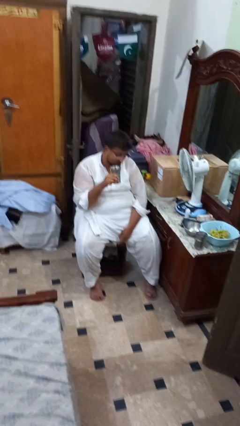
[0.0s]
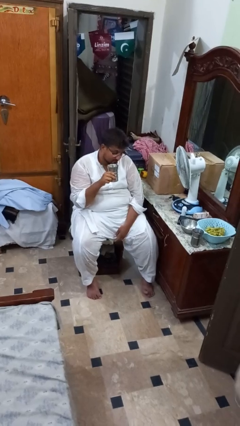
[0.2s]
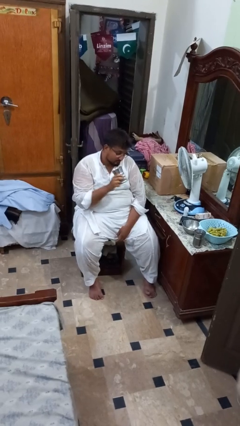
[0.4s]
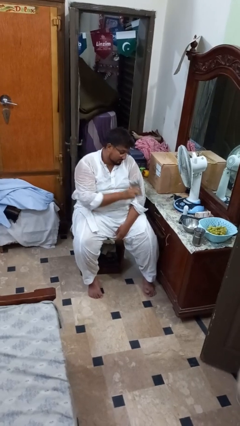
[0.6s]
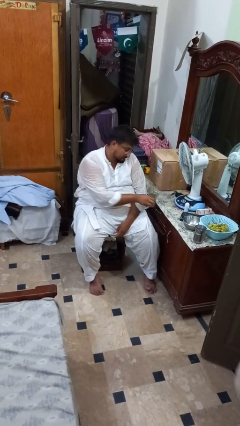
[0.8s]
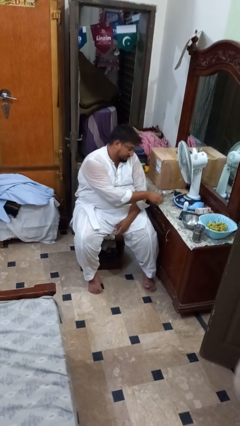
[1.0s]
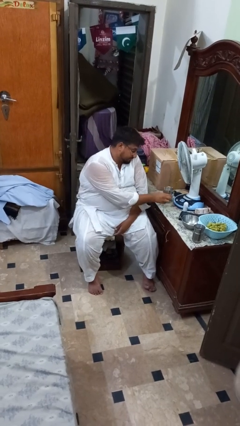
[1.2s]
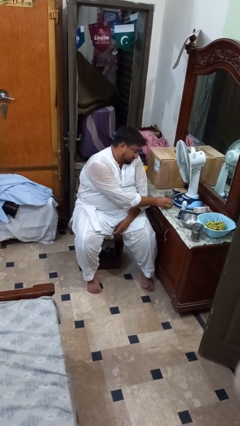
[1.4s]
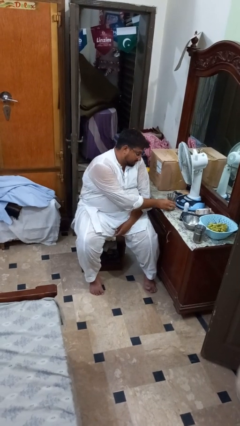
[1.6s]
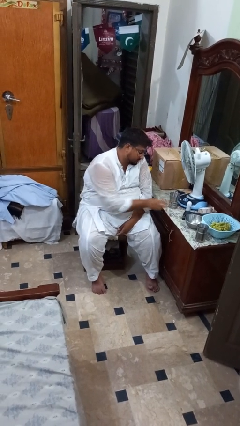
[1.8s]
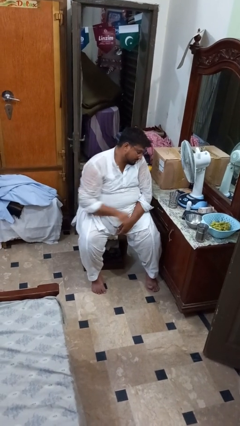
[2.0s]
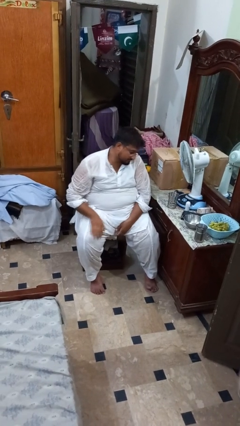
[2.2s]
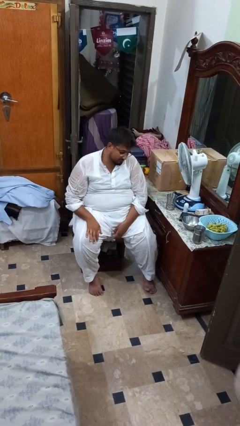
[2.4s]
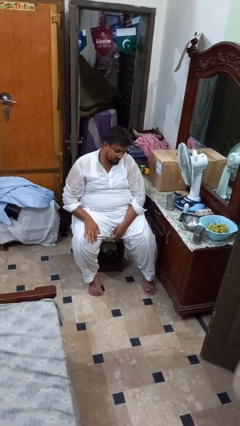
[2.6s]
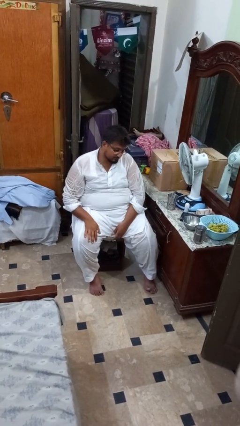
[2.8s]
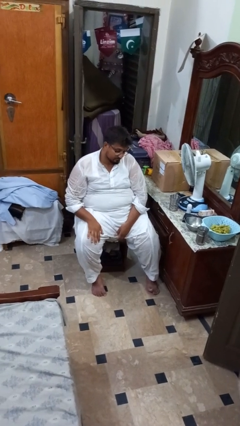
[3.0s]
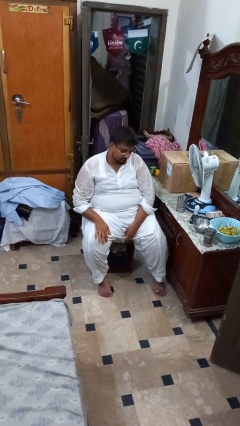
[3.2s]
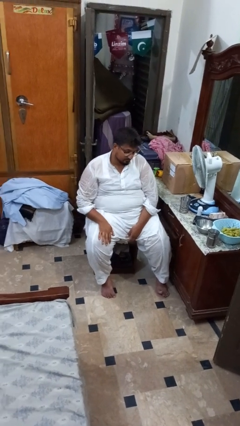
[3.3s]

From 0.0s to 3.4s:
person puts down object on table

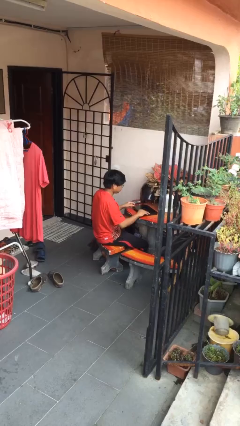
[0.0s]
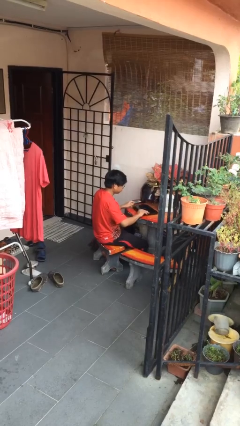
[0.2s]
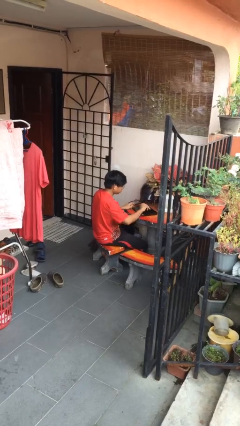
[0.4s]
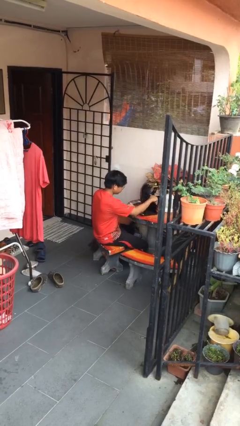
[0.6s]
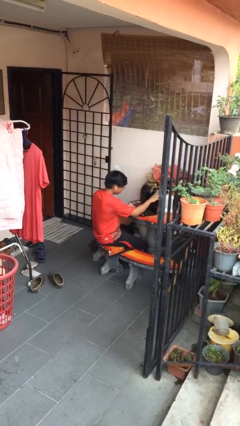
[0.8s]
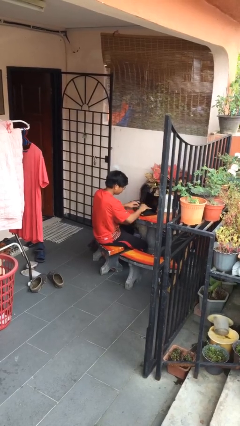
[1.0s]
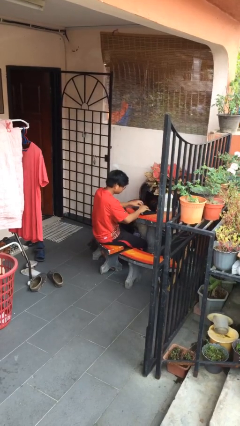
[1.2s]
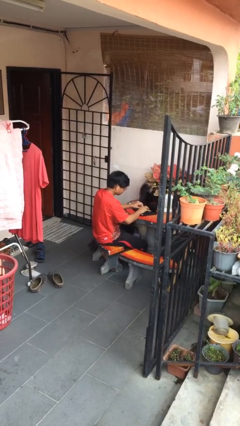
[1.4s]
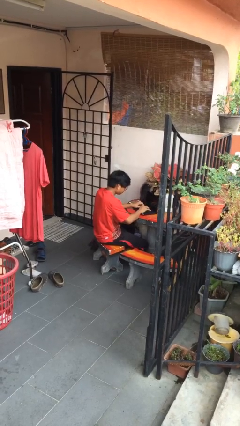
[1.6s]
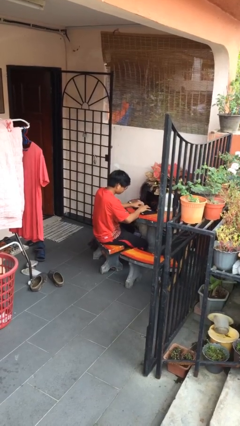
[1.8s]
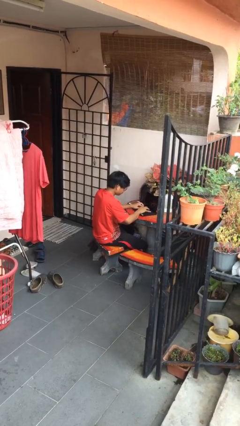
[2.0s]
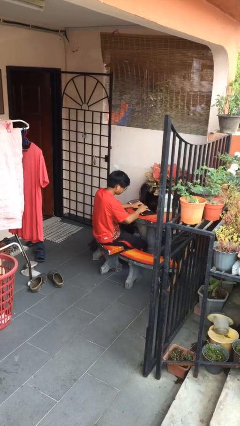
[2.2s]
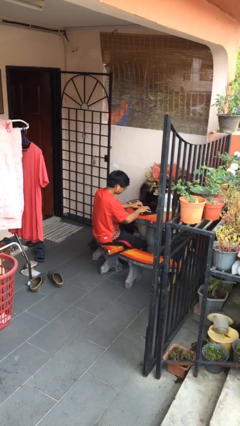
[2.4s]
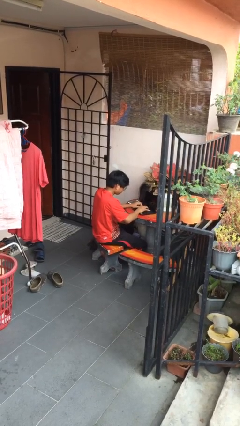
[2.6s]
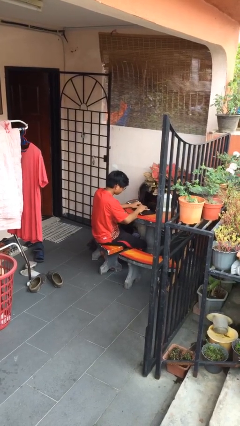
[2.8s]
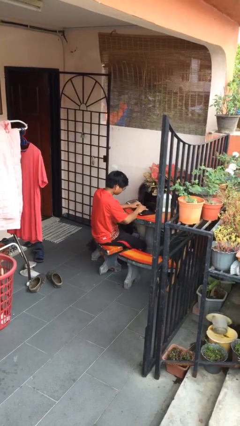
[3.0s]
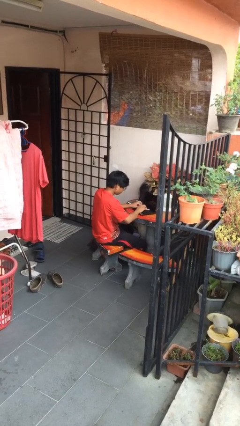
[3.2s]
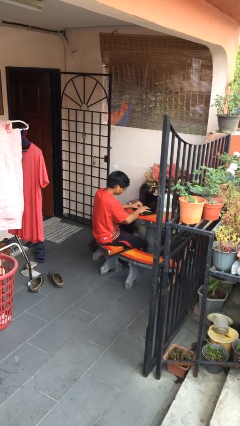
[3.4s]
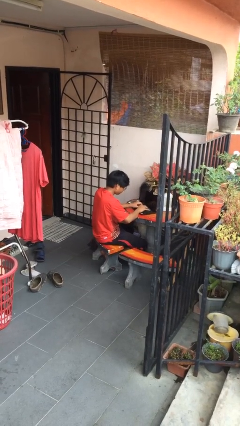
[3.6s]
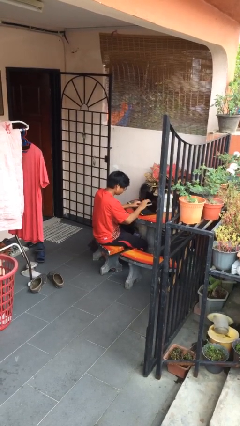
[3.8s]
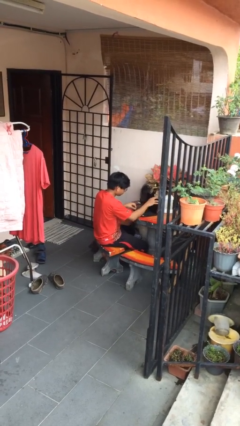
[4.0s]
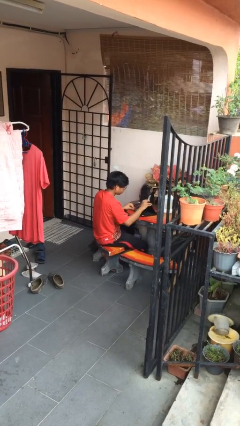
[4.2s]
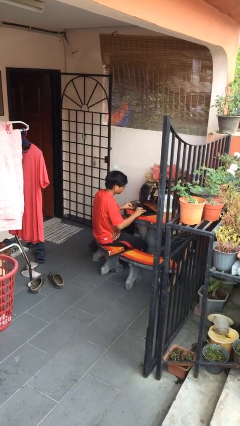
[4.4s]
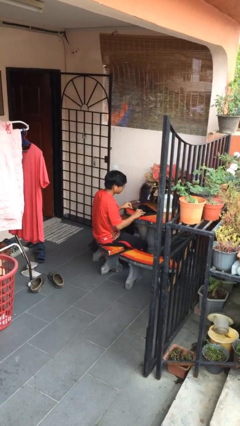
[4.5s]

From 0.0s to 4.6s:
person interacts with laptop

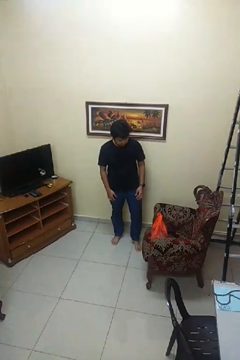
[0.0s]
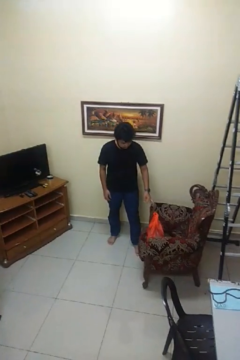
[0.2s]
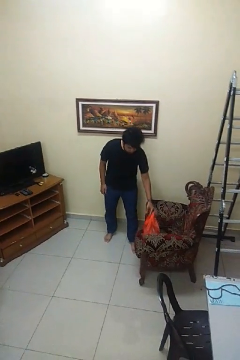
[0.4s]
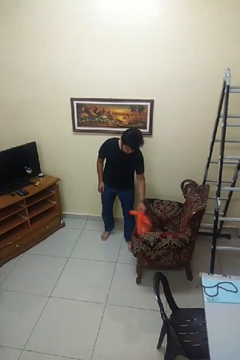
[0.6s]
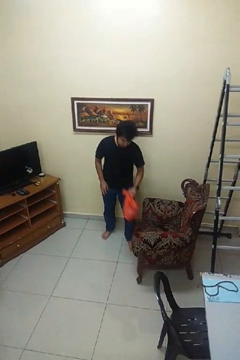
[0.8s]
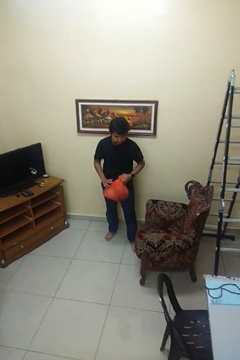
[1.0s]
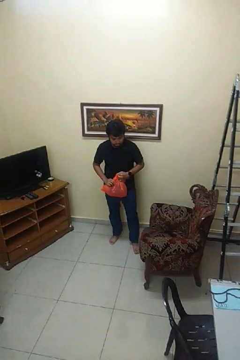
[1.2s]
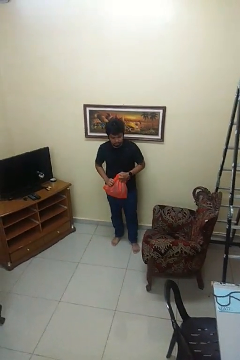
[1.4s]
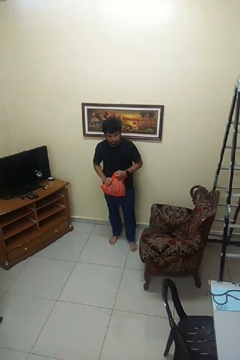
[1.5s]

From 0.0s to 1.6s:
person picks up object from couch

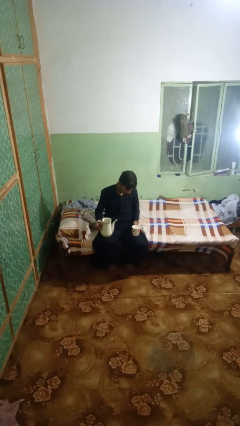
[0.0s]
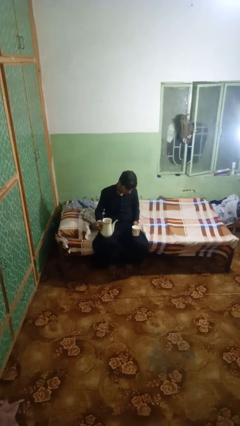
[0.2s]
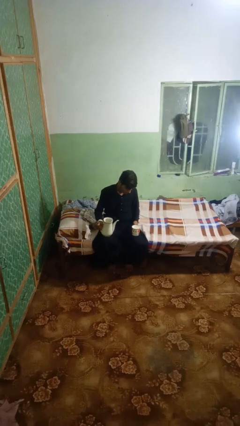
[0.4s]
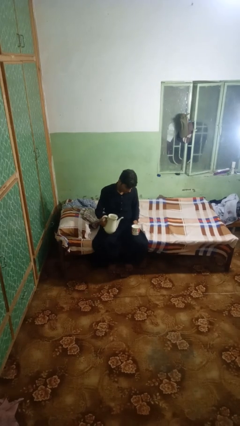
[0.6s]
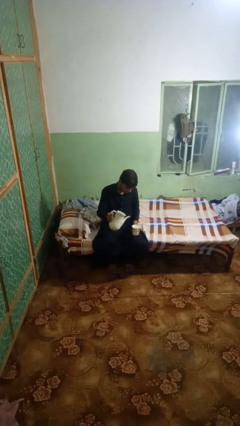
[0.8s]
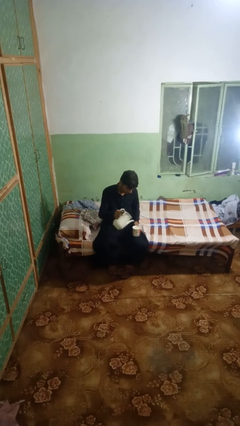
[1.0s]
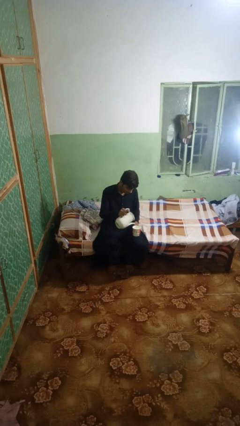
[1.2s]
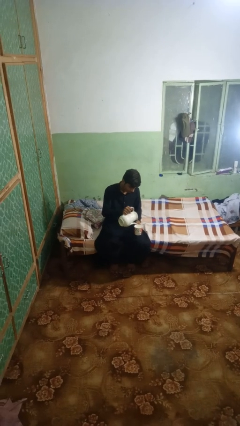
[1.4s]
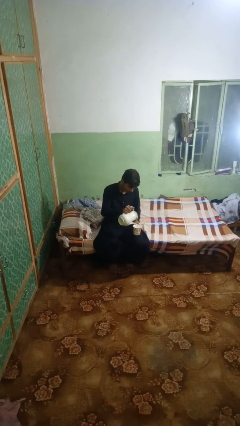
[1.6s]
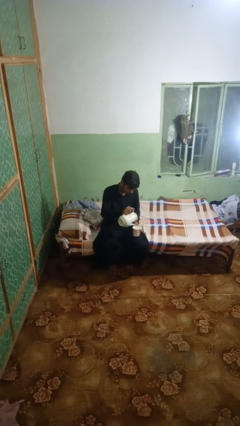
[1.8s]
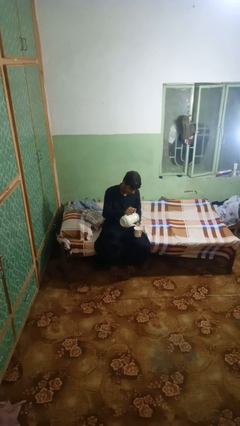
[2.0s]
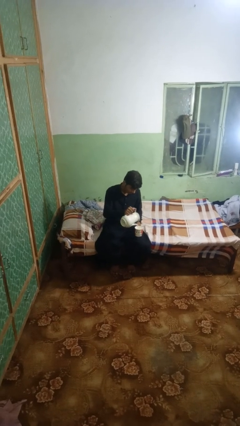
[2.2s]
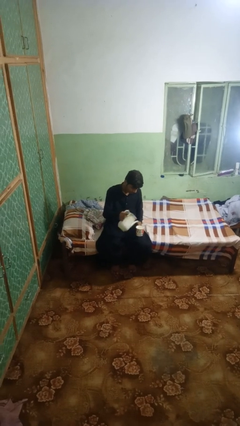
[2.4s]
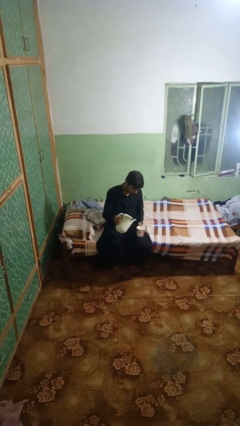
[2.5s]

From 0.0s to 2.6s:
person pours coffee into mug

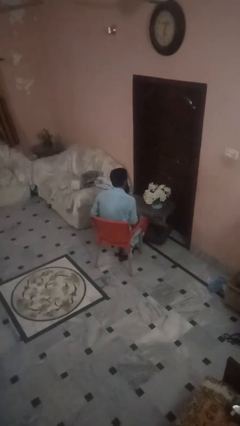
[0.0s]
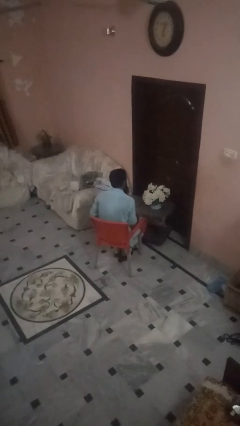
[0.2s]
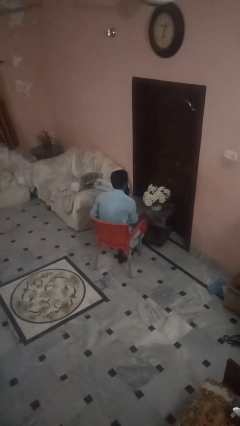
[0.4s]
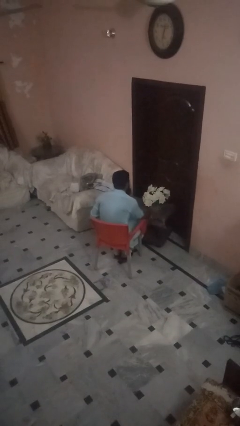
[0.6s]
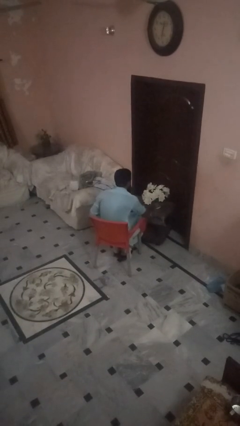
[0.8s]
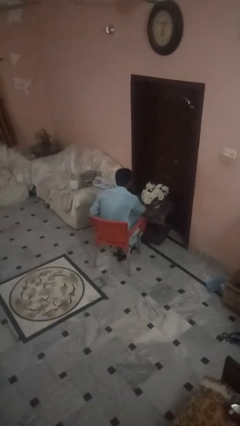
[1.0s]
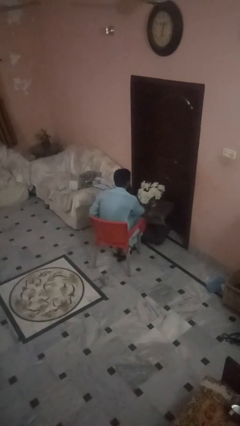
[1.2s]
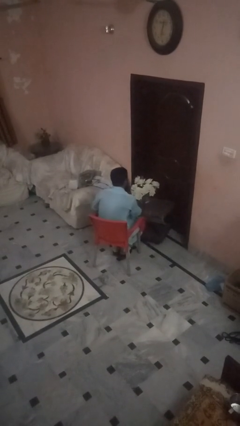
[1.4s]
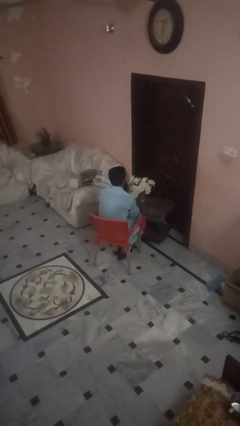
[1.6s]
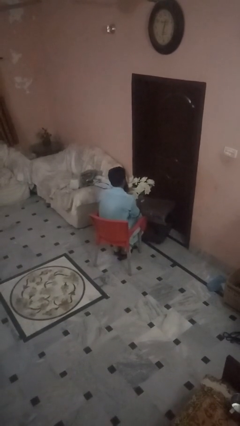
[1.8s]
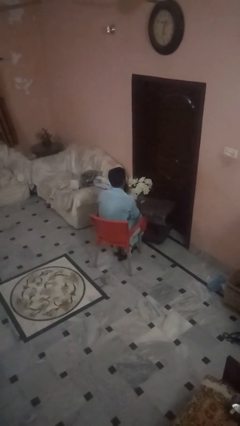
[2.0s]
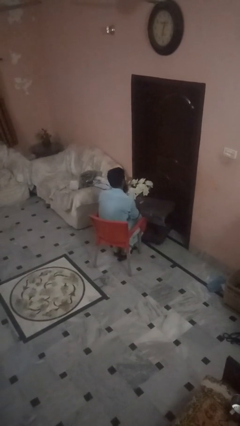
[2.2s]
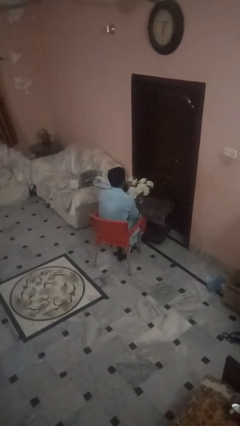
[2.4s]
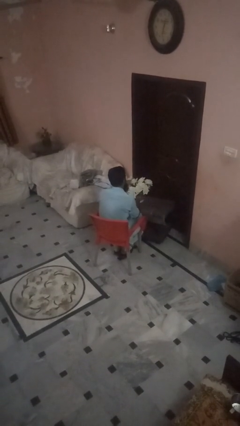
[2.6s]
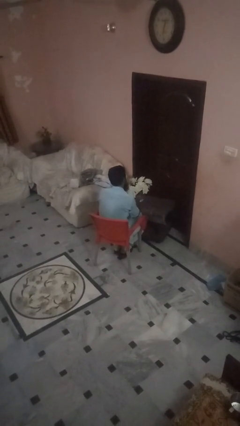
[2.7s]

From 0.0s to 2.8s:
person arranges flowers in vase

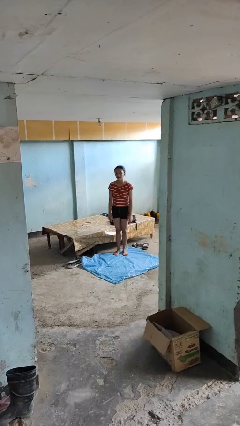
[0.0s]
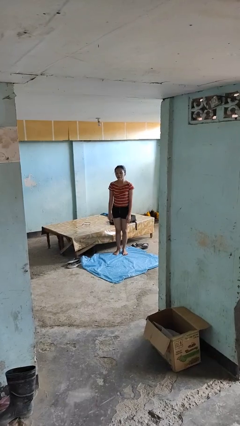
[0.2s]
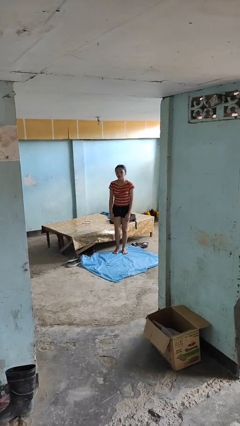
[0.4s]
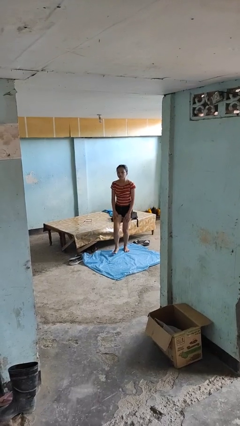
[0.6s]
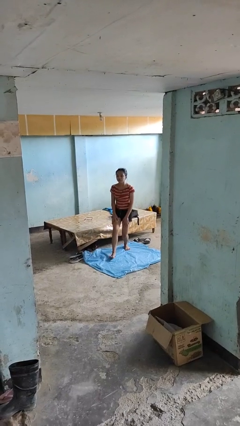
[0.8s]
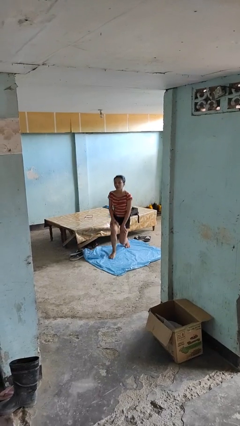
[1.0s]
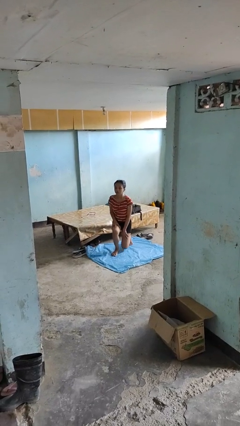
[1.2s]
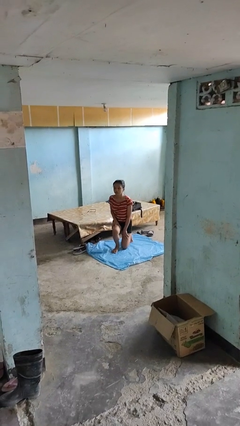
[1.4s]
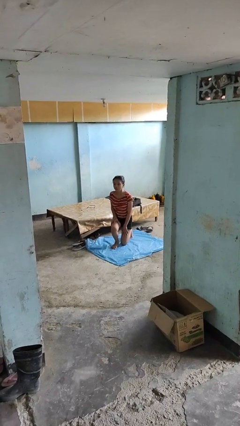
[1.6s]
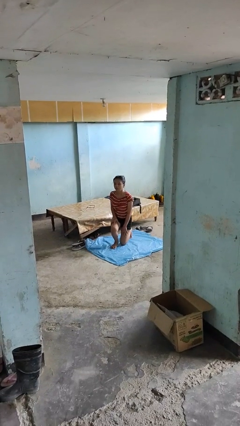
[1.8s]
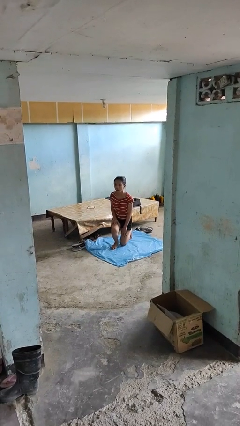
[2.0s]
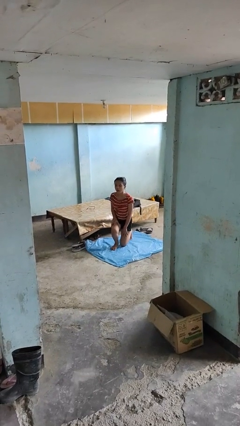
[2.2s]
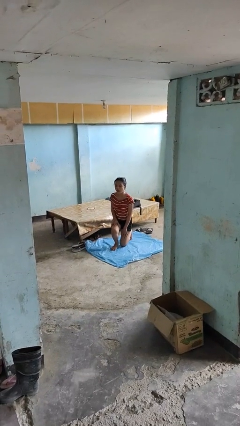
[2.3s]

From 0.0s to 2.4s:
person kneels

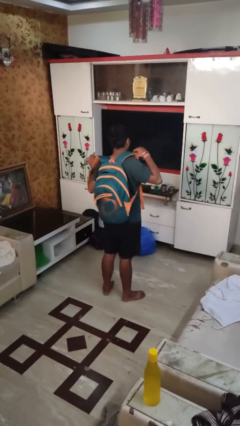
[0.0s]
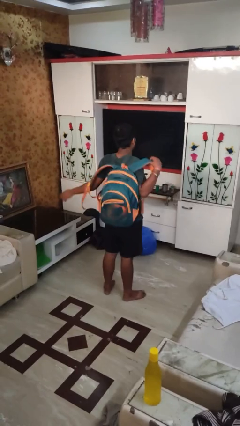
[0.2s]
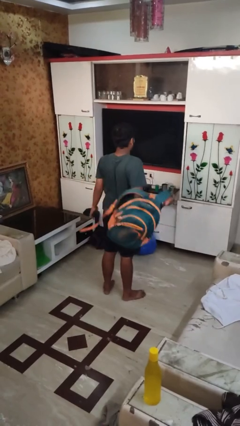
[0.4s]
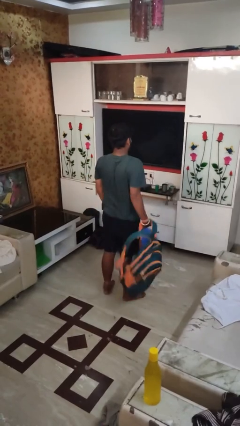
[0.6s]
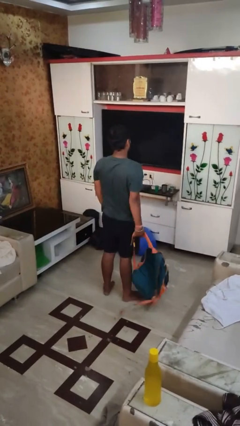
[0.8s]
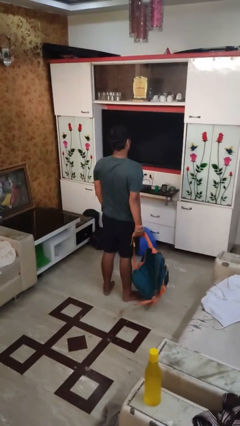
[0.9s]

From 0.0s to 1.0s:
person takes off backpack
